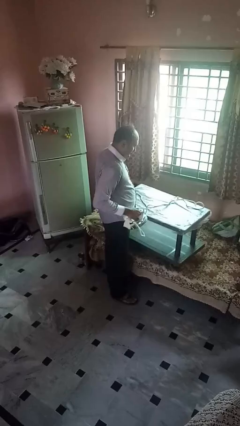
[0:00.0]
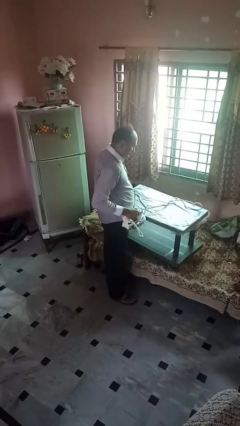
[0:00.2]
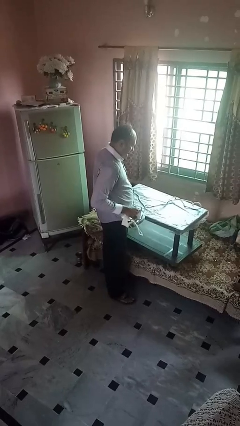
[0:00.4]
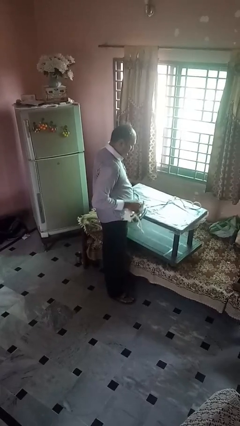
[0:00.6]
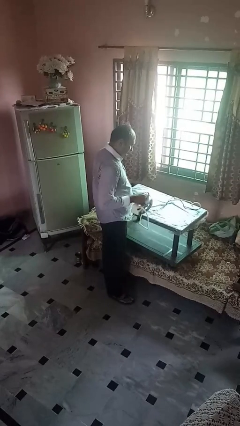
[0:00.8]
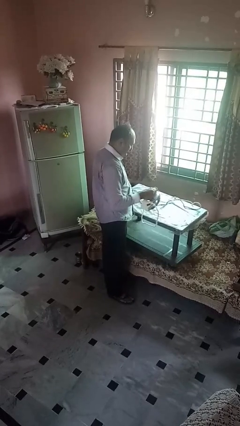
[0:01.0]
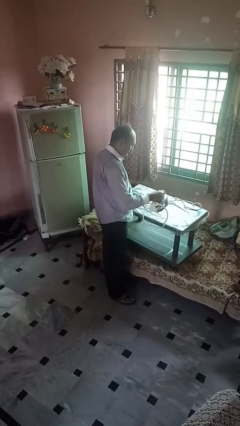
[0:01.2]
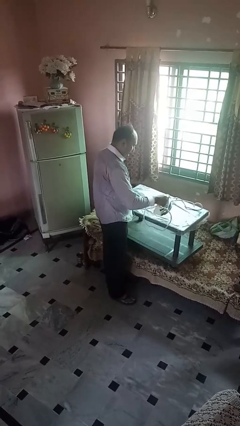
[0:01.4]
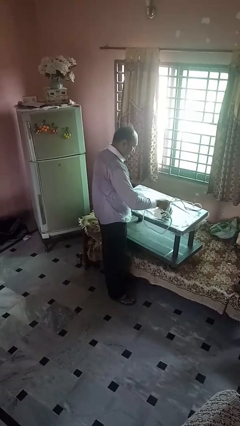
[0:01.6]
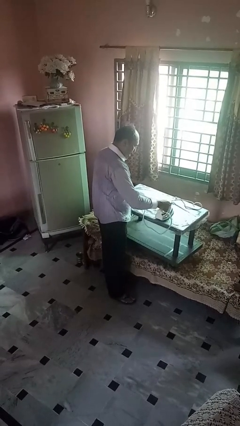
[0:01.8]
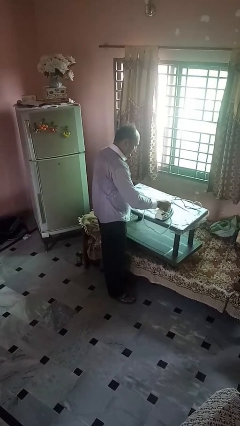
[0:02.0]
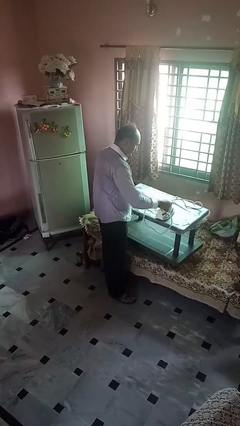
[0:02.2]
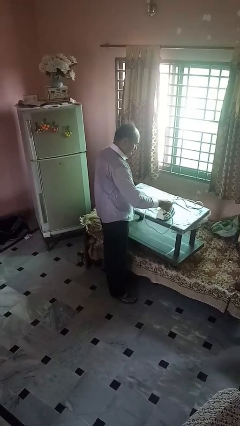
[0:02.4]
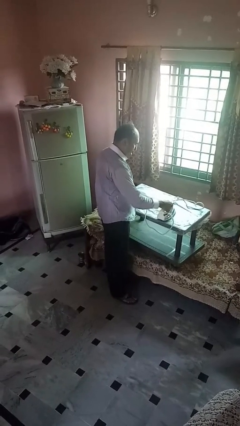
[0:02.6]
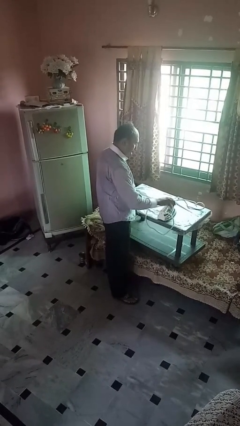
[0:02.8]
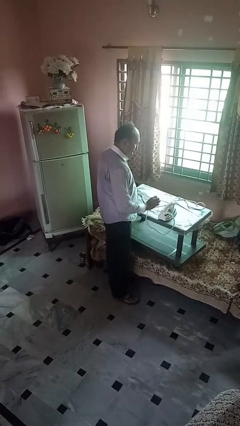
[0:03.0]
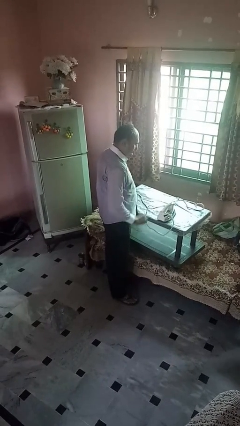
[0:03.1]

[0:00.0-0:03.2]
person puts down object on countertop

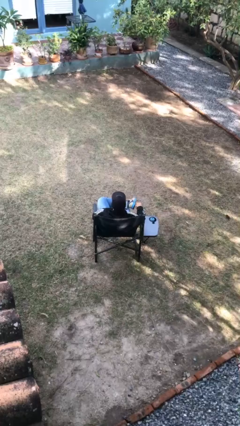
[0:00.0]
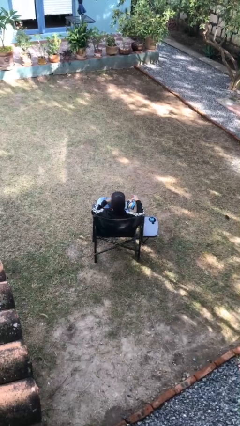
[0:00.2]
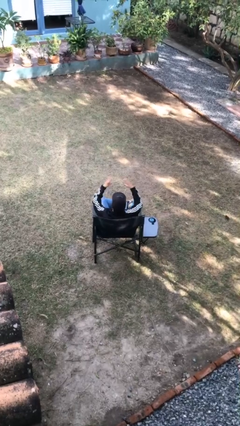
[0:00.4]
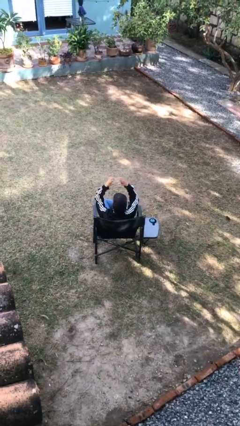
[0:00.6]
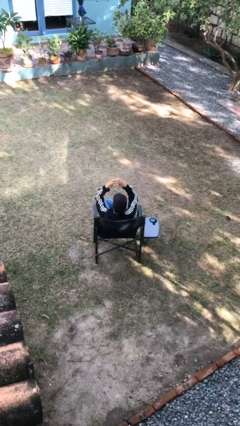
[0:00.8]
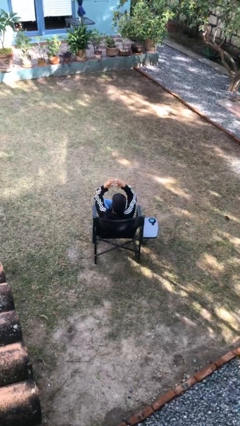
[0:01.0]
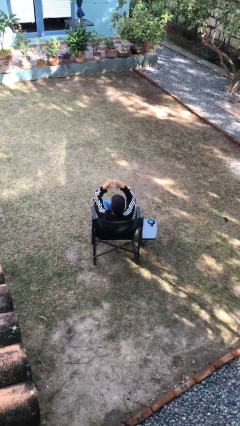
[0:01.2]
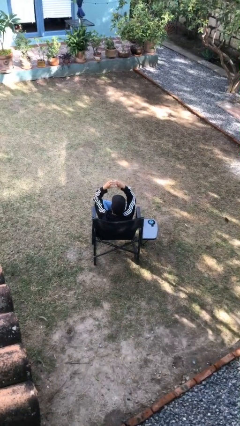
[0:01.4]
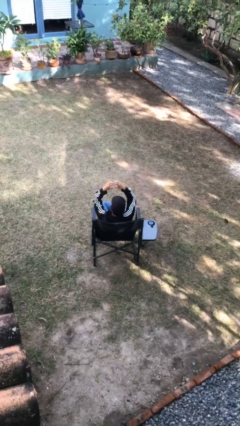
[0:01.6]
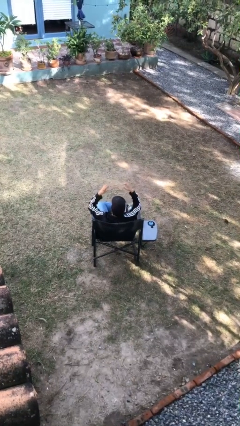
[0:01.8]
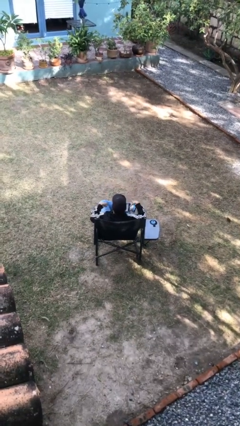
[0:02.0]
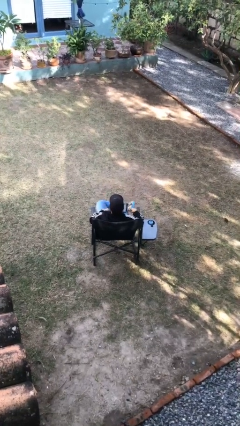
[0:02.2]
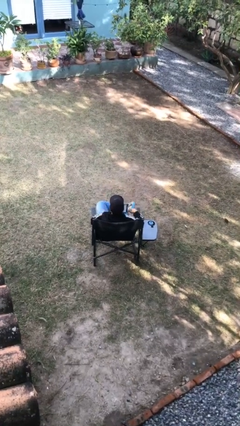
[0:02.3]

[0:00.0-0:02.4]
person gestures heart

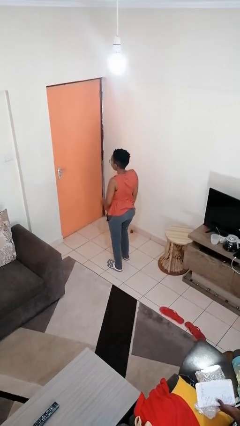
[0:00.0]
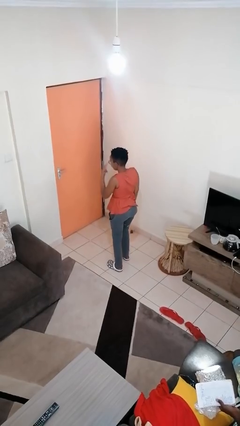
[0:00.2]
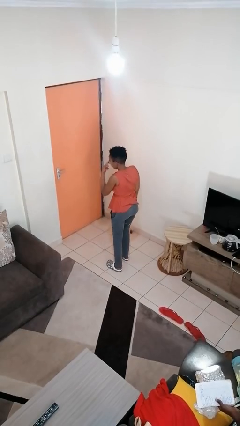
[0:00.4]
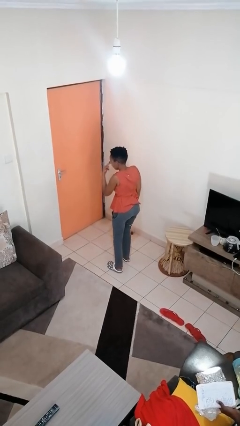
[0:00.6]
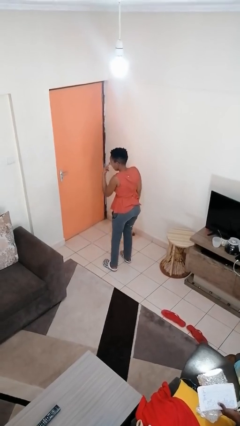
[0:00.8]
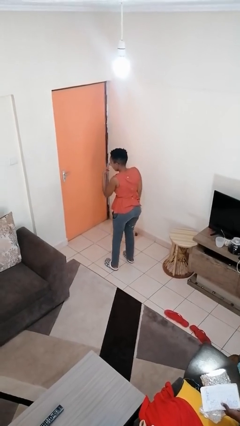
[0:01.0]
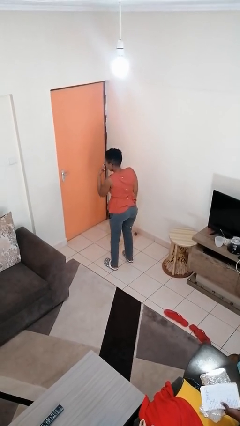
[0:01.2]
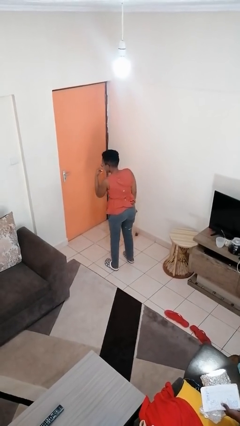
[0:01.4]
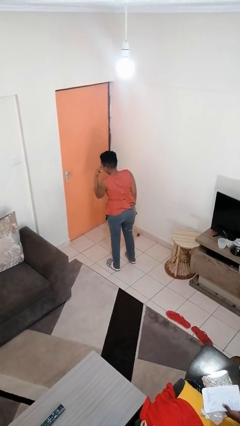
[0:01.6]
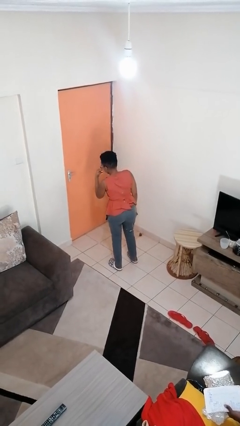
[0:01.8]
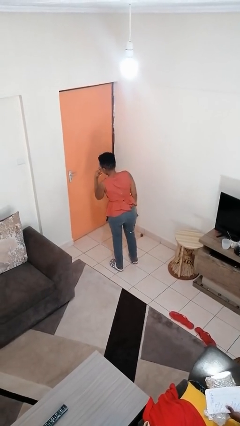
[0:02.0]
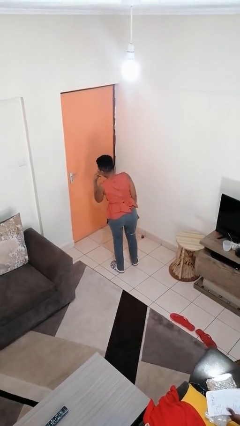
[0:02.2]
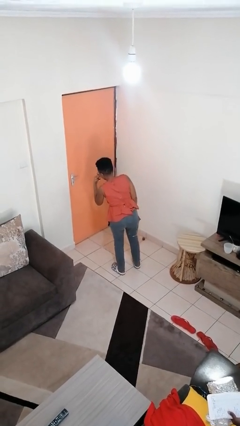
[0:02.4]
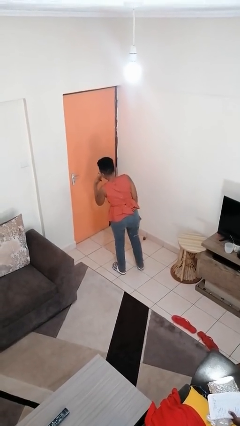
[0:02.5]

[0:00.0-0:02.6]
person gestures watch closely

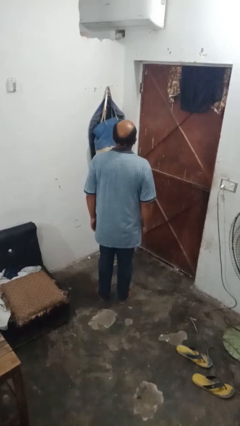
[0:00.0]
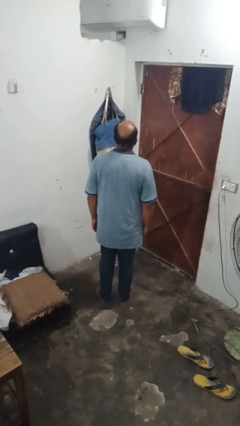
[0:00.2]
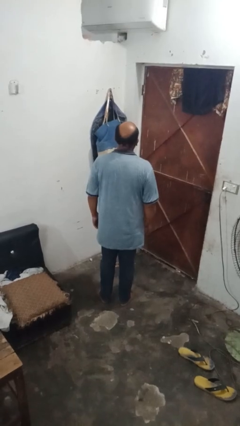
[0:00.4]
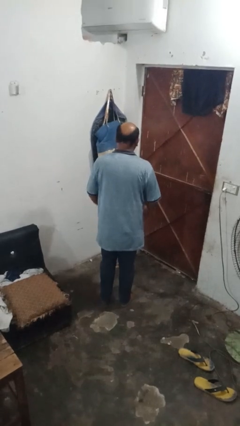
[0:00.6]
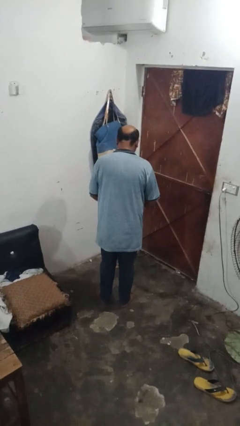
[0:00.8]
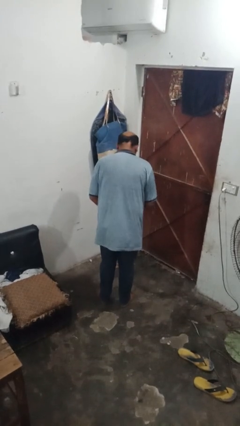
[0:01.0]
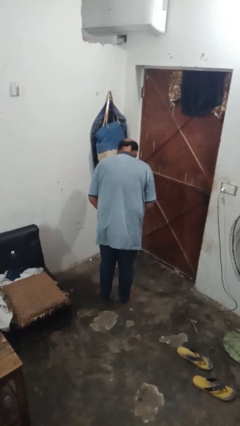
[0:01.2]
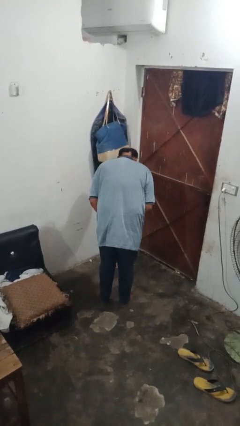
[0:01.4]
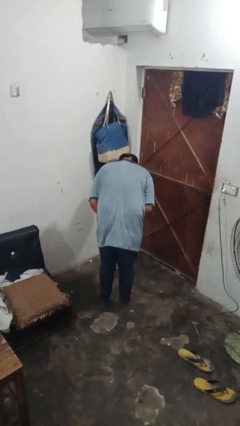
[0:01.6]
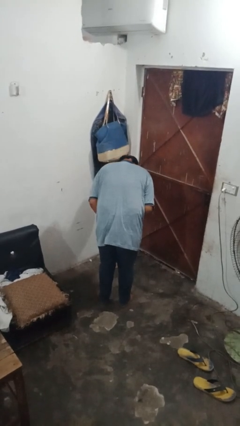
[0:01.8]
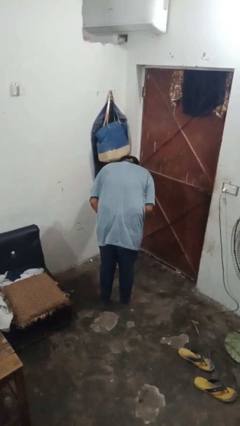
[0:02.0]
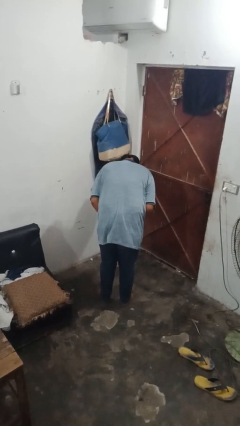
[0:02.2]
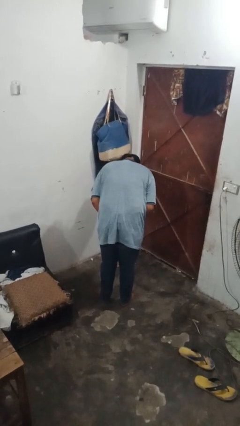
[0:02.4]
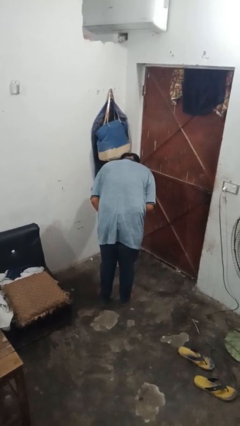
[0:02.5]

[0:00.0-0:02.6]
person bows

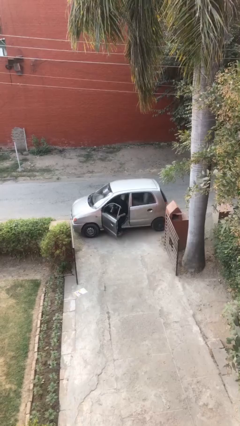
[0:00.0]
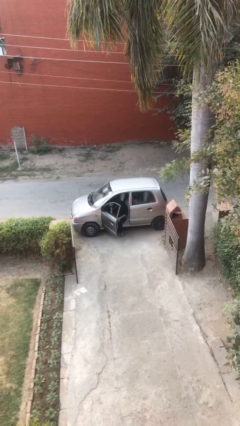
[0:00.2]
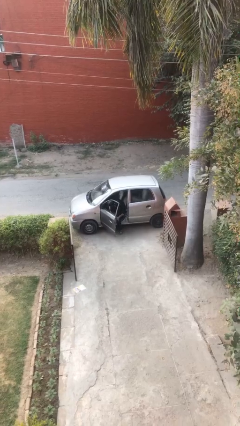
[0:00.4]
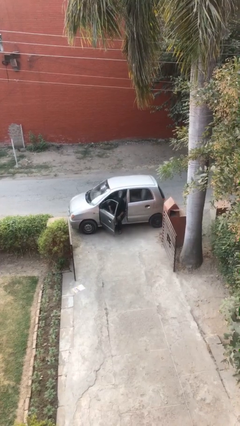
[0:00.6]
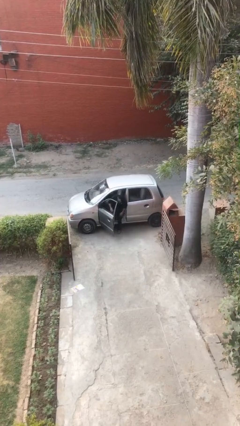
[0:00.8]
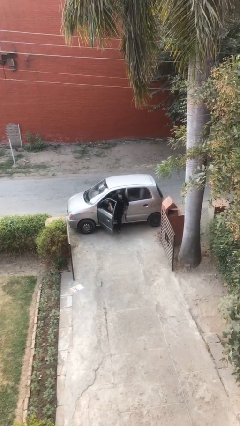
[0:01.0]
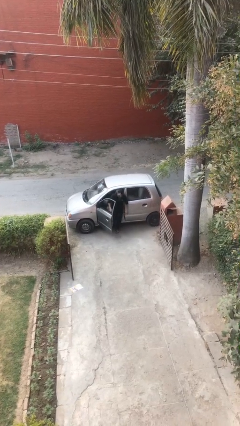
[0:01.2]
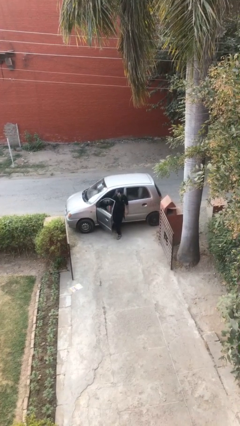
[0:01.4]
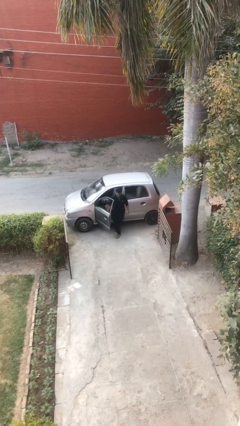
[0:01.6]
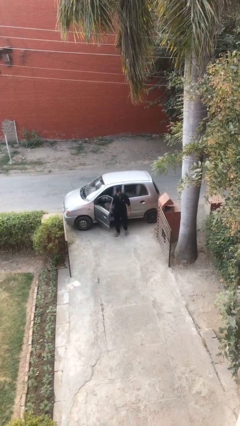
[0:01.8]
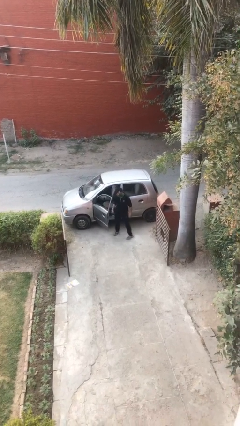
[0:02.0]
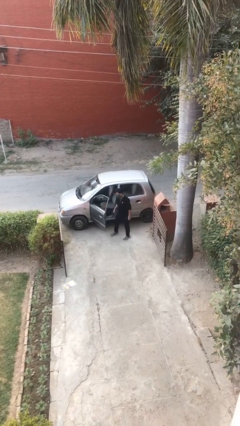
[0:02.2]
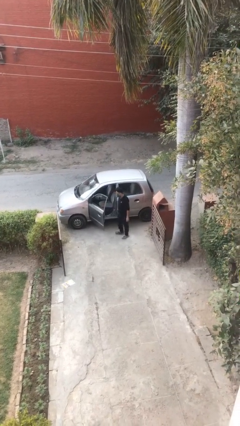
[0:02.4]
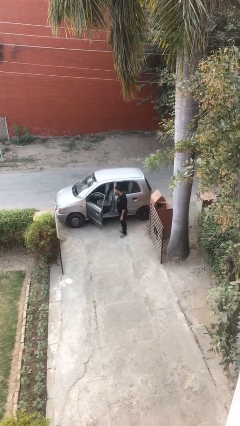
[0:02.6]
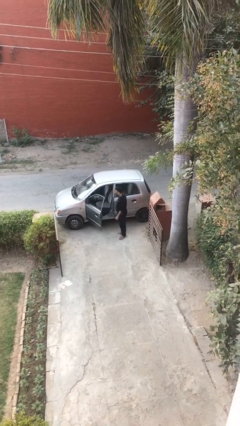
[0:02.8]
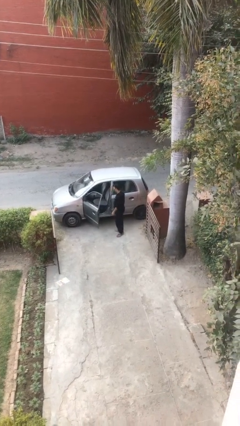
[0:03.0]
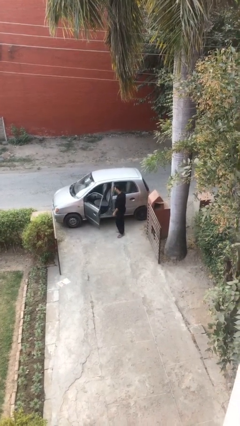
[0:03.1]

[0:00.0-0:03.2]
person exits car

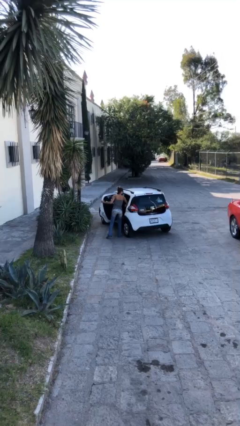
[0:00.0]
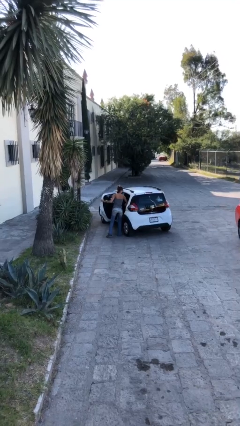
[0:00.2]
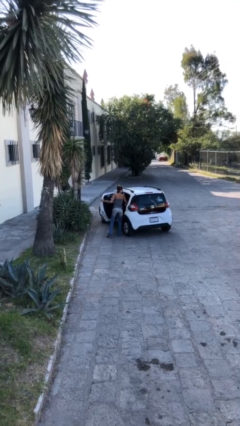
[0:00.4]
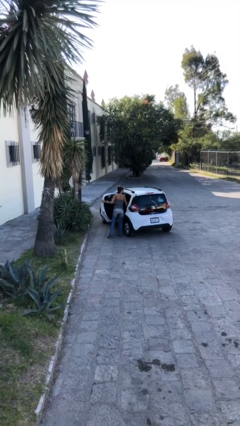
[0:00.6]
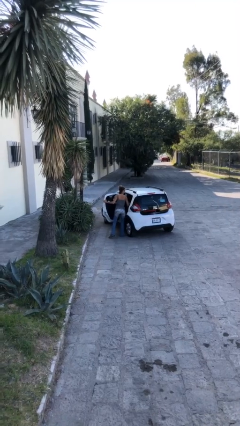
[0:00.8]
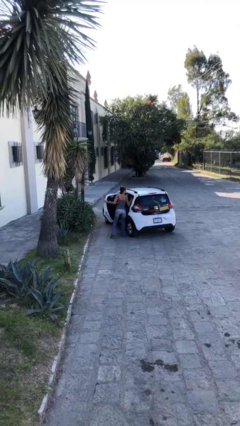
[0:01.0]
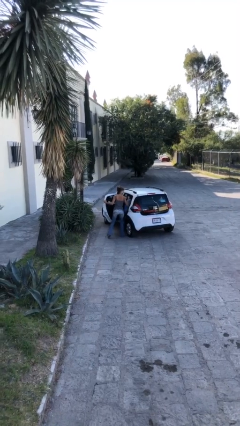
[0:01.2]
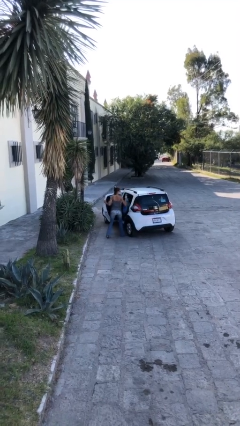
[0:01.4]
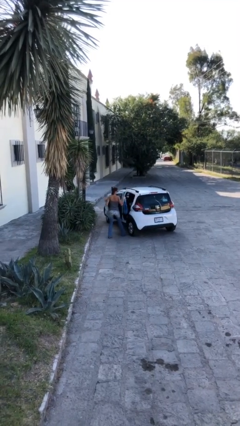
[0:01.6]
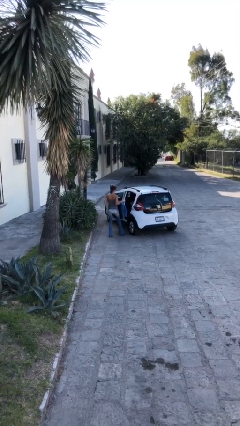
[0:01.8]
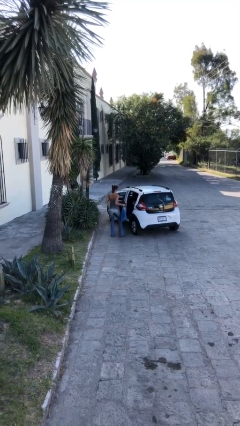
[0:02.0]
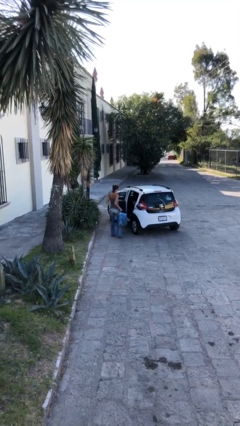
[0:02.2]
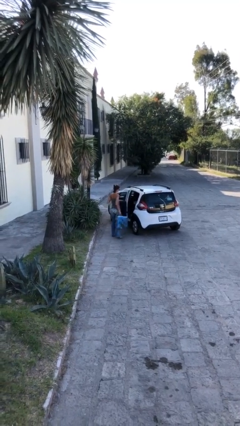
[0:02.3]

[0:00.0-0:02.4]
person unloads car

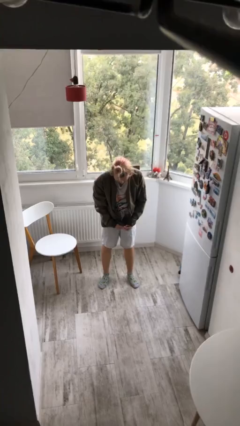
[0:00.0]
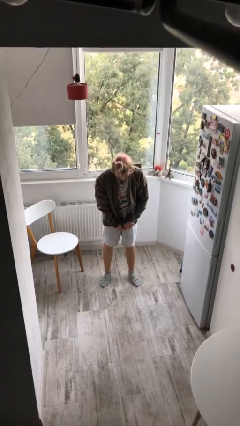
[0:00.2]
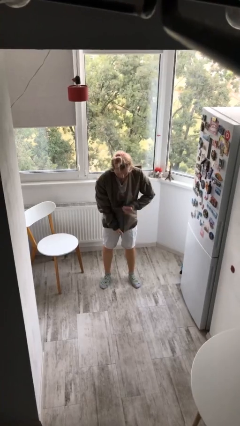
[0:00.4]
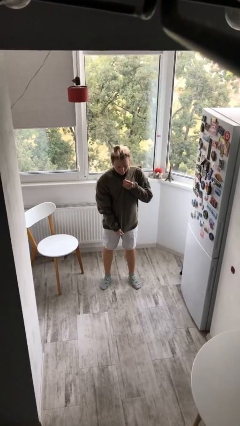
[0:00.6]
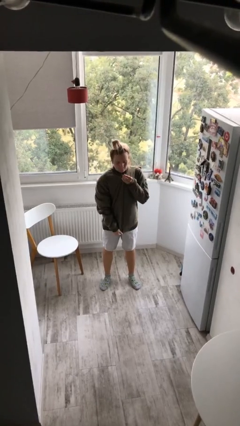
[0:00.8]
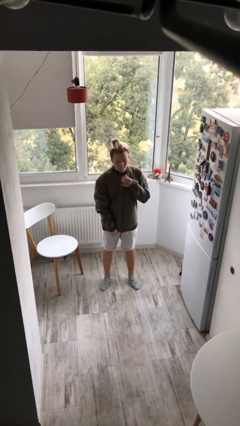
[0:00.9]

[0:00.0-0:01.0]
person zips up jacket

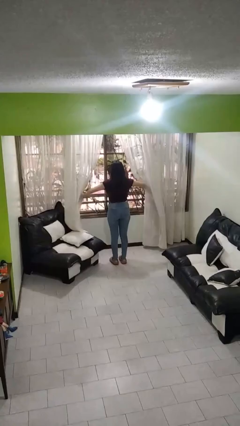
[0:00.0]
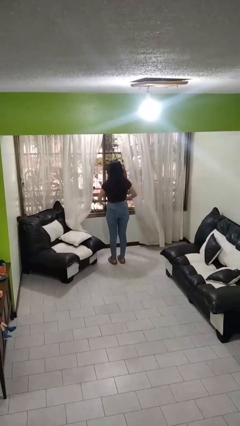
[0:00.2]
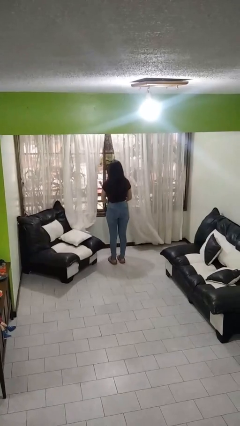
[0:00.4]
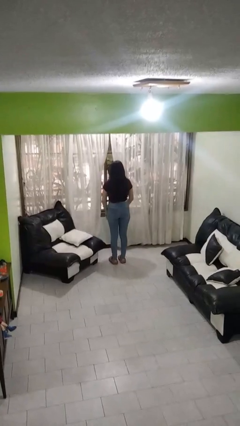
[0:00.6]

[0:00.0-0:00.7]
person closes curtains
